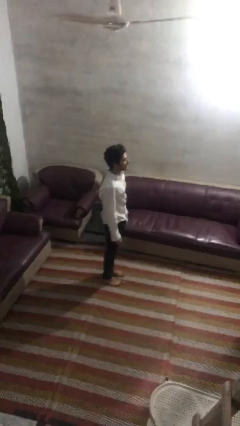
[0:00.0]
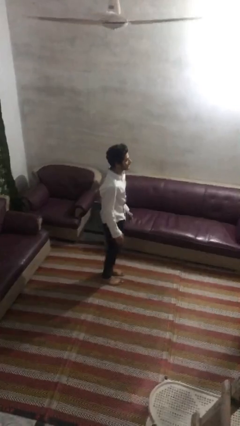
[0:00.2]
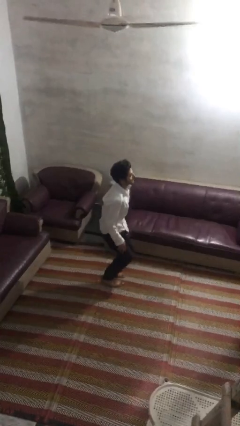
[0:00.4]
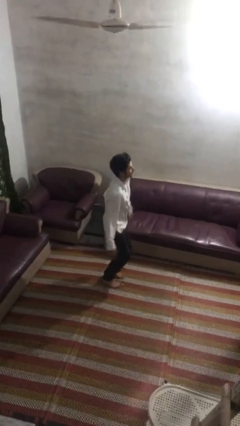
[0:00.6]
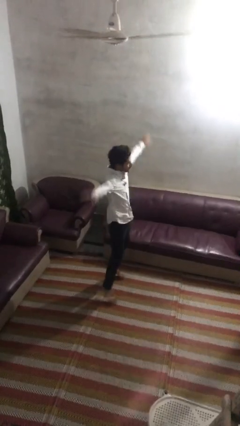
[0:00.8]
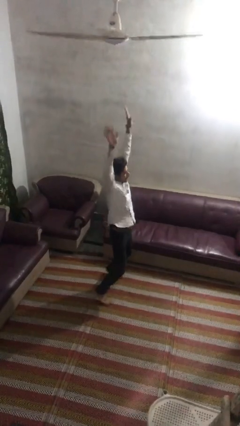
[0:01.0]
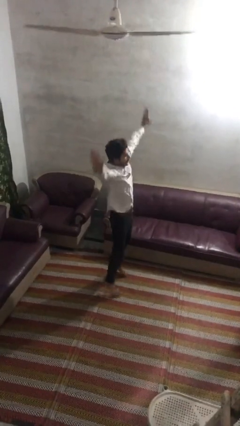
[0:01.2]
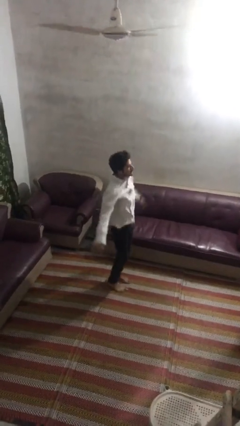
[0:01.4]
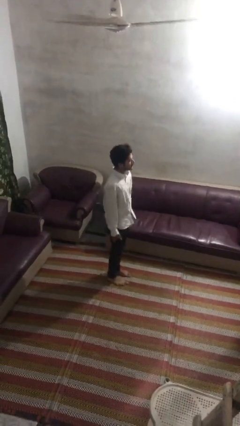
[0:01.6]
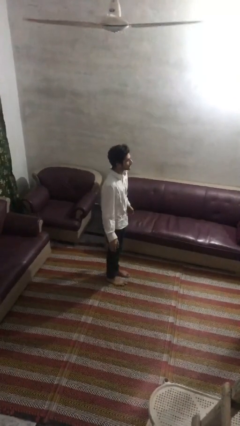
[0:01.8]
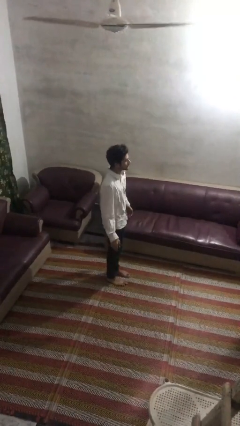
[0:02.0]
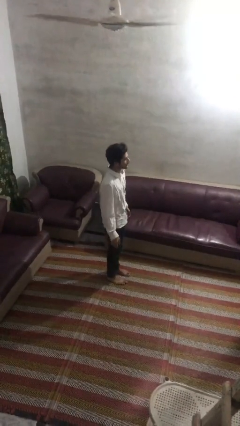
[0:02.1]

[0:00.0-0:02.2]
person exercises with jumping jacks

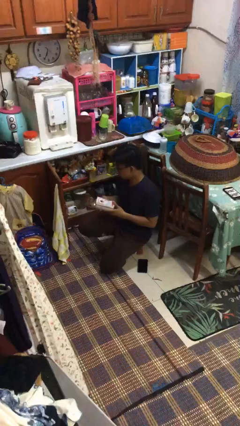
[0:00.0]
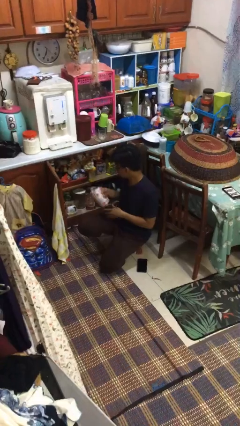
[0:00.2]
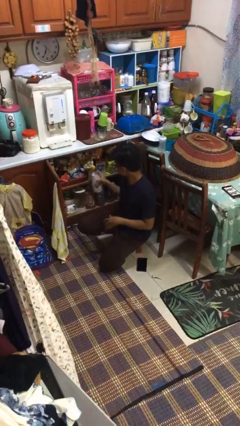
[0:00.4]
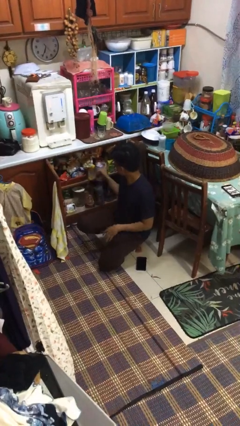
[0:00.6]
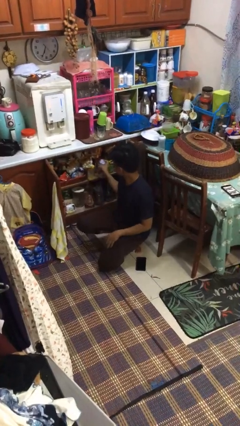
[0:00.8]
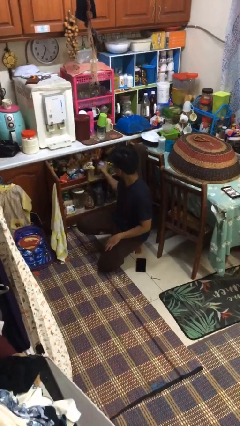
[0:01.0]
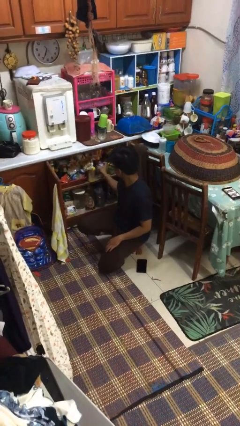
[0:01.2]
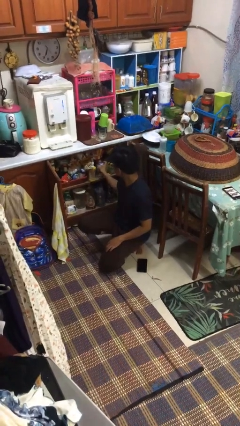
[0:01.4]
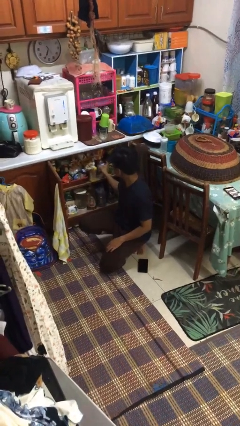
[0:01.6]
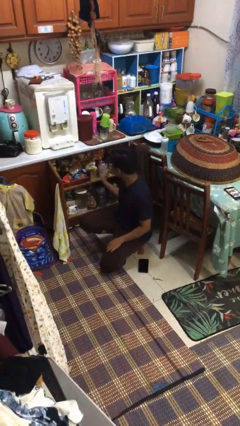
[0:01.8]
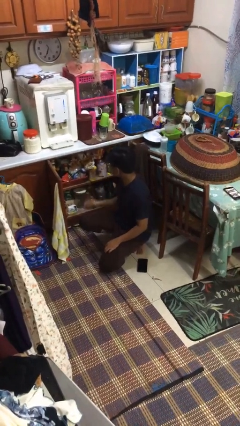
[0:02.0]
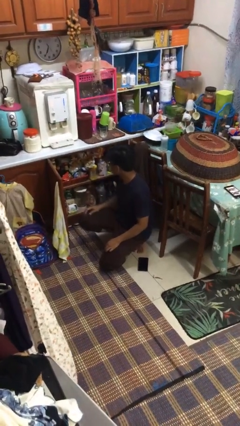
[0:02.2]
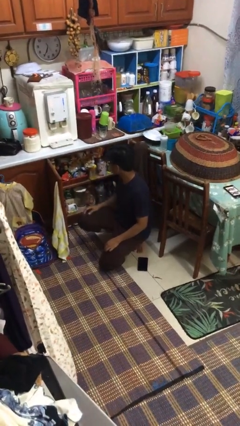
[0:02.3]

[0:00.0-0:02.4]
person puts object in cabinet

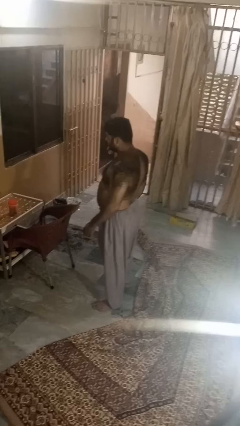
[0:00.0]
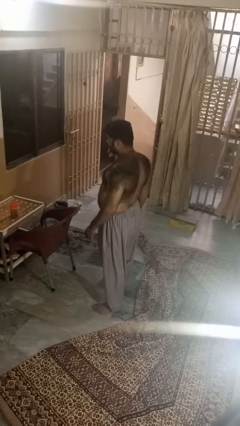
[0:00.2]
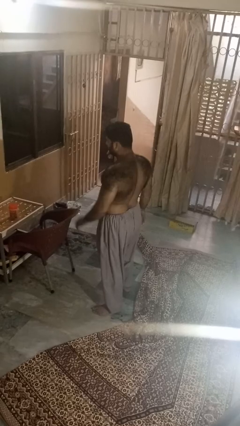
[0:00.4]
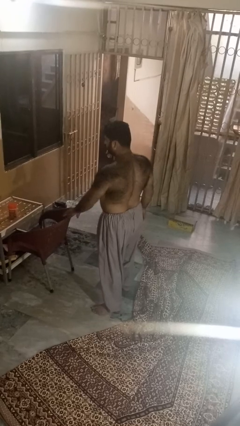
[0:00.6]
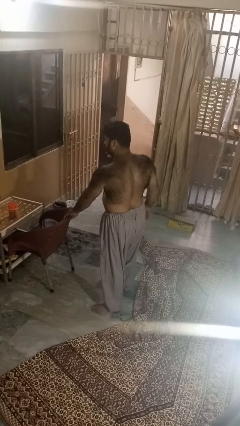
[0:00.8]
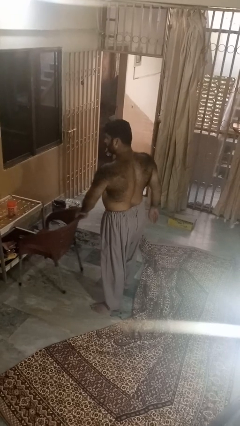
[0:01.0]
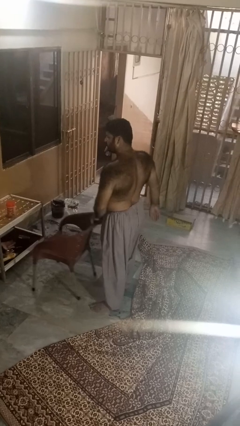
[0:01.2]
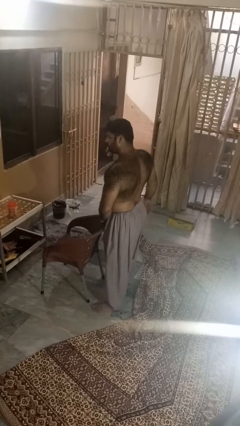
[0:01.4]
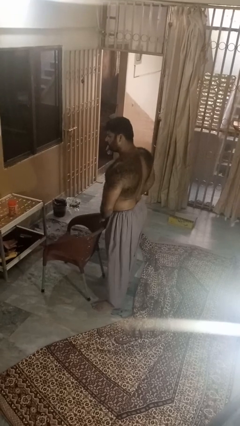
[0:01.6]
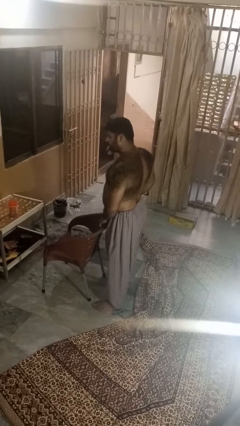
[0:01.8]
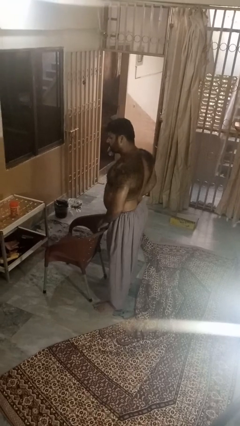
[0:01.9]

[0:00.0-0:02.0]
person pulls out chair

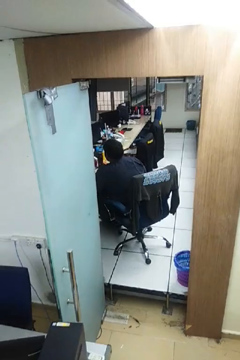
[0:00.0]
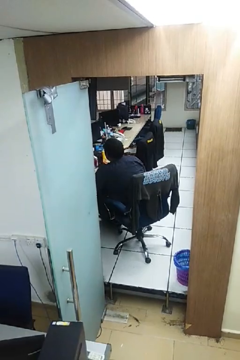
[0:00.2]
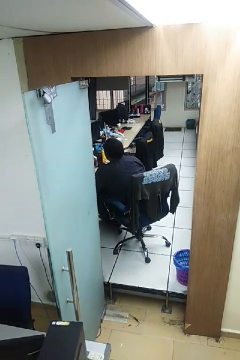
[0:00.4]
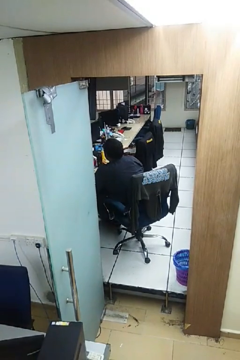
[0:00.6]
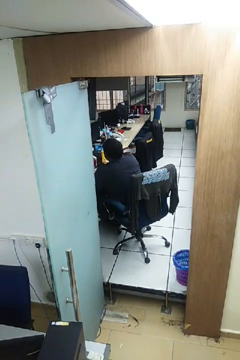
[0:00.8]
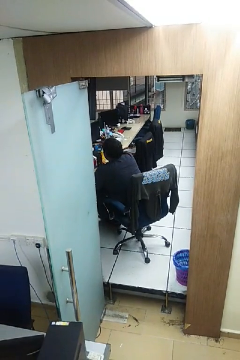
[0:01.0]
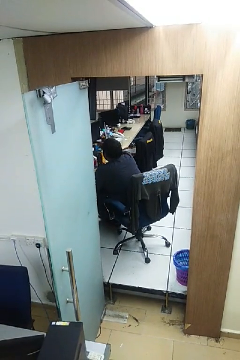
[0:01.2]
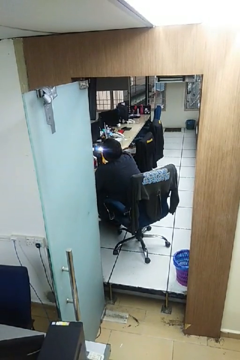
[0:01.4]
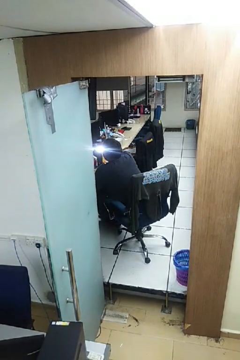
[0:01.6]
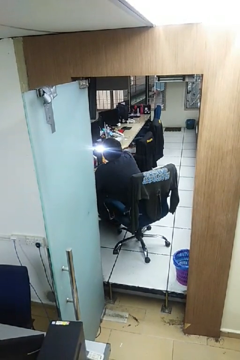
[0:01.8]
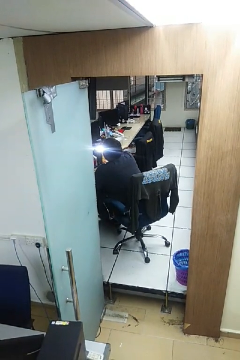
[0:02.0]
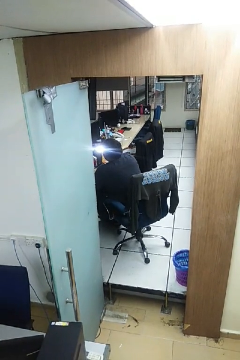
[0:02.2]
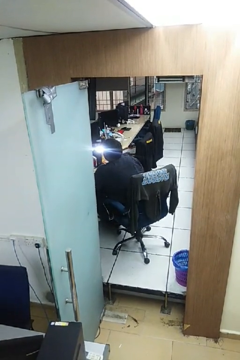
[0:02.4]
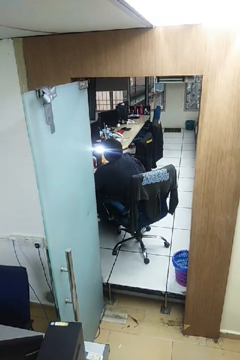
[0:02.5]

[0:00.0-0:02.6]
person turns on lamp

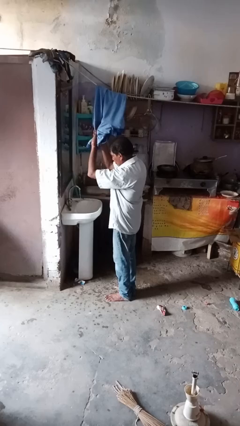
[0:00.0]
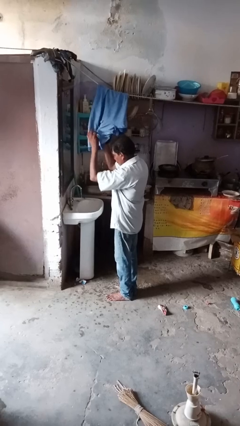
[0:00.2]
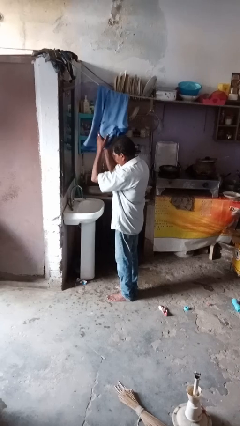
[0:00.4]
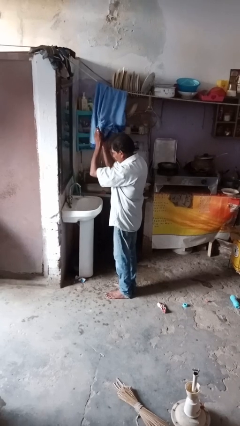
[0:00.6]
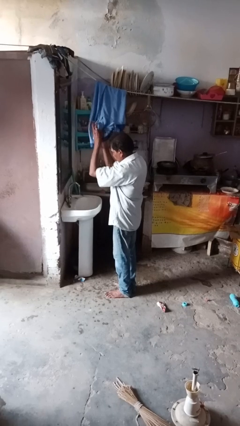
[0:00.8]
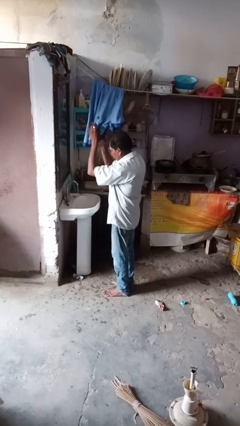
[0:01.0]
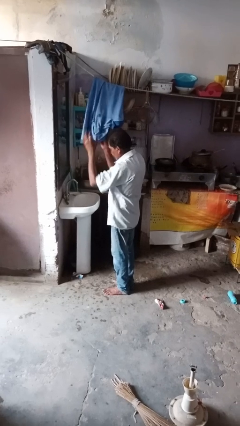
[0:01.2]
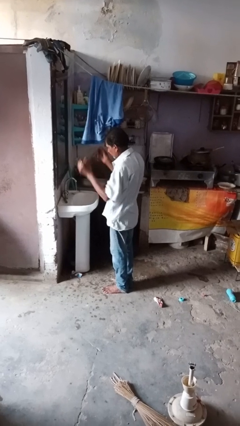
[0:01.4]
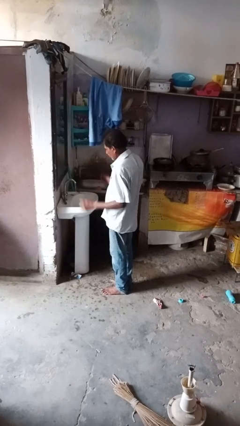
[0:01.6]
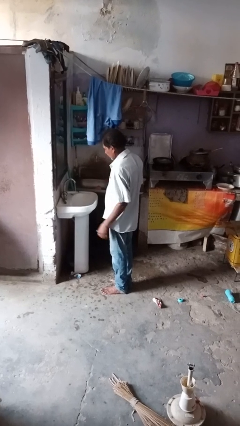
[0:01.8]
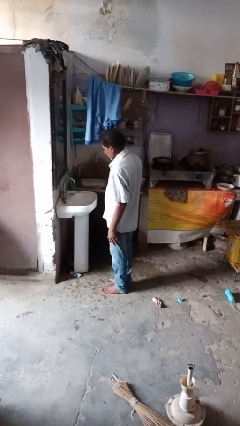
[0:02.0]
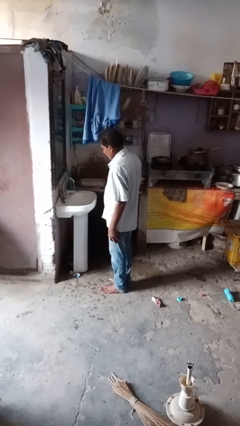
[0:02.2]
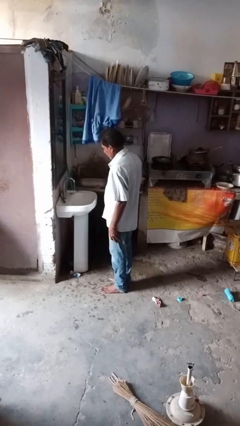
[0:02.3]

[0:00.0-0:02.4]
person dries hands with towel

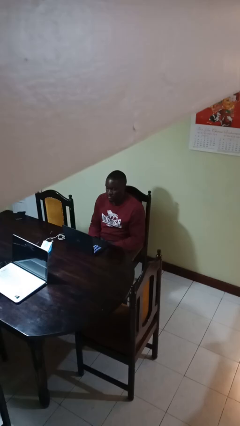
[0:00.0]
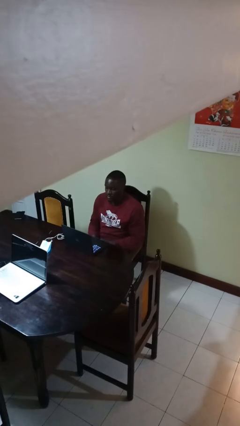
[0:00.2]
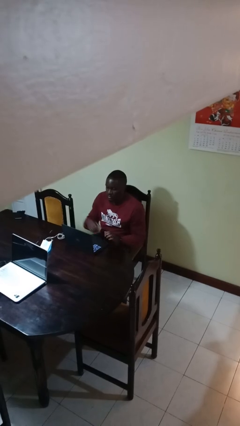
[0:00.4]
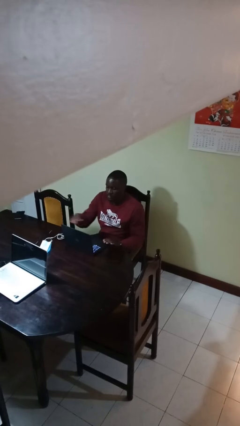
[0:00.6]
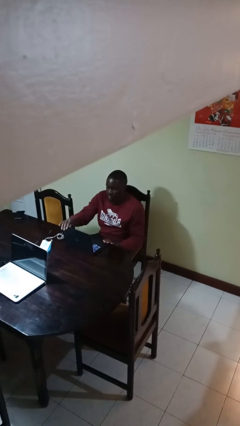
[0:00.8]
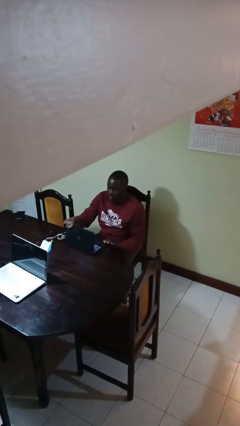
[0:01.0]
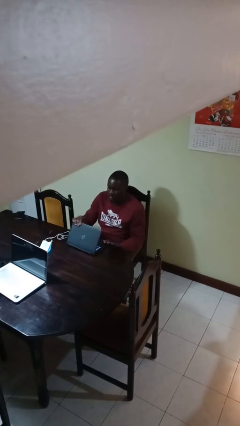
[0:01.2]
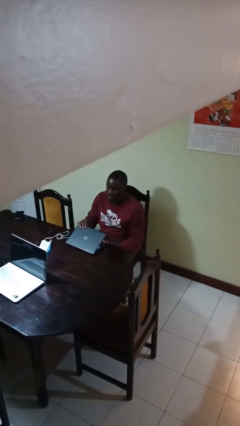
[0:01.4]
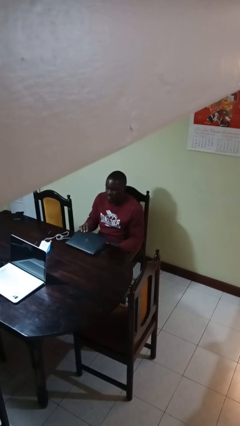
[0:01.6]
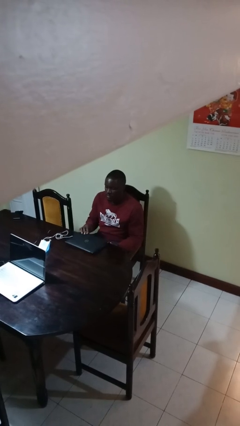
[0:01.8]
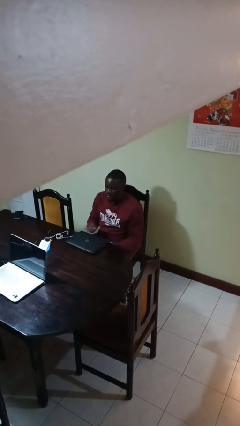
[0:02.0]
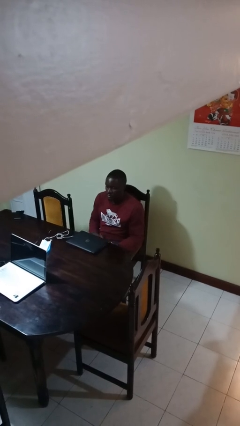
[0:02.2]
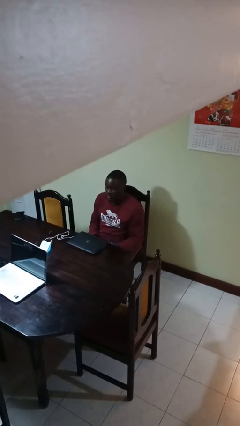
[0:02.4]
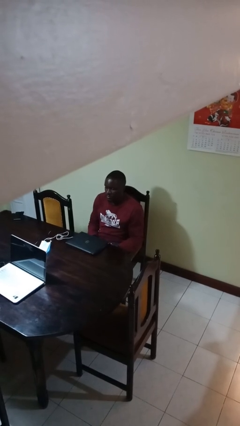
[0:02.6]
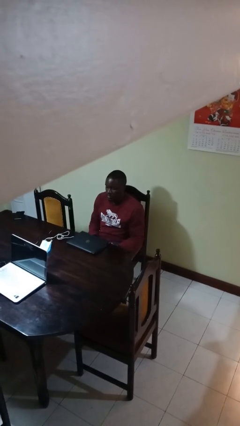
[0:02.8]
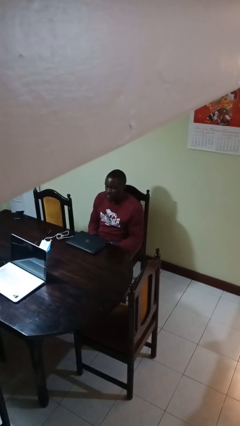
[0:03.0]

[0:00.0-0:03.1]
person closes laptop

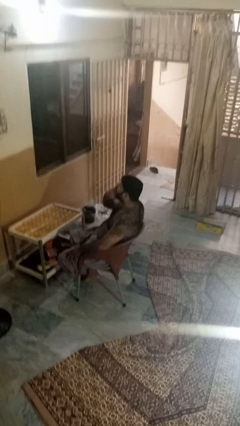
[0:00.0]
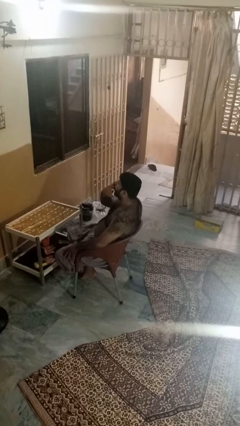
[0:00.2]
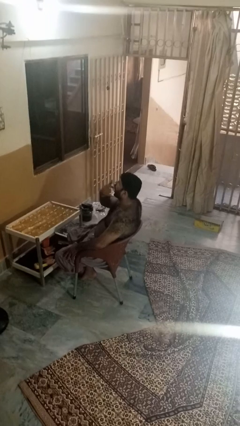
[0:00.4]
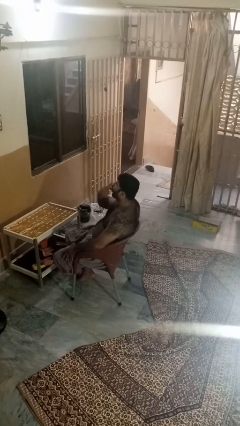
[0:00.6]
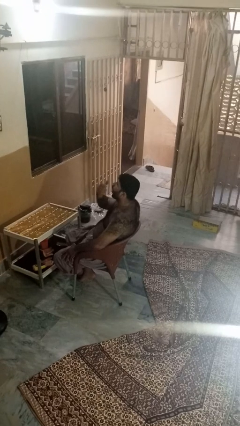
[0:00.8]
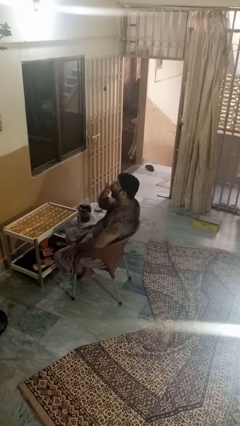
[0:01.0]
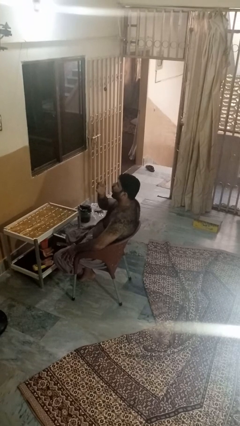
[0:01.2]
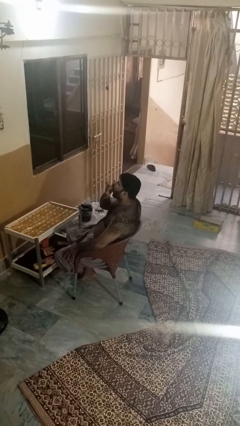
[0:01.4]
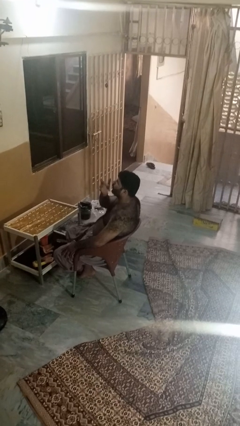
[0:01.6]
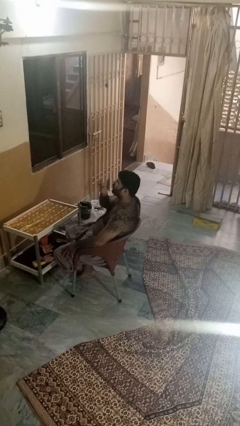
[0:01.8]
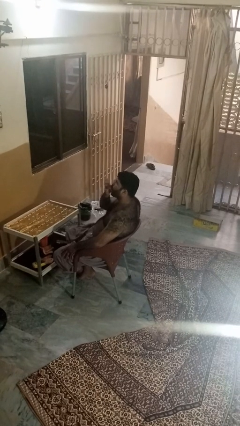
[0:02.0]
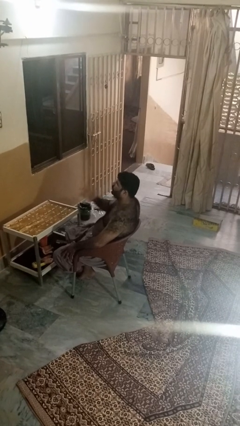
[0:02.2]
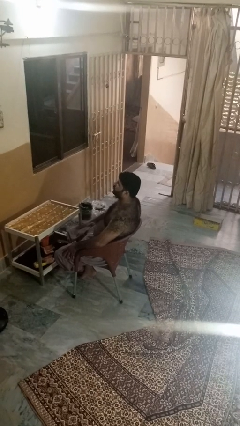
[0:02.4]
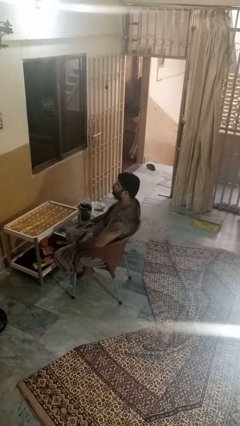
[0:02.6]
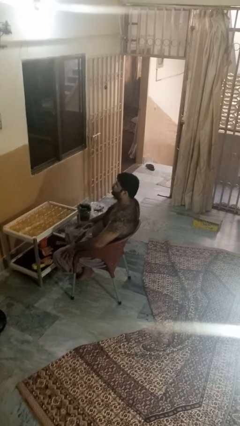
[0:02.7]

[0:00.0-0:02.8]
person licks fingers
